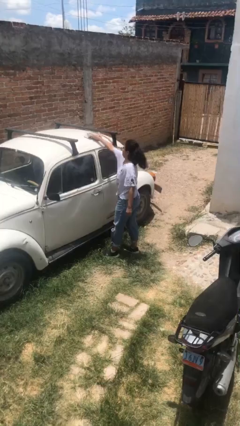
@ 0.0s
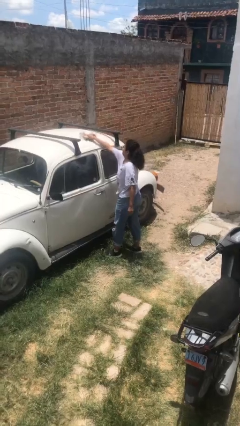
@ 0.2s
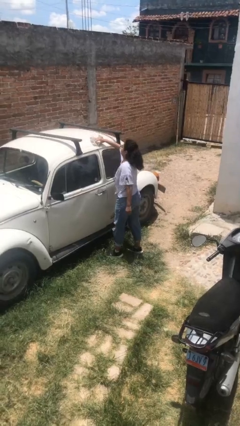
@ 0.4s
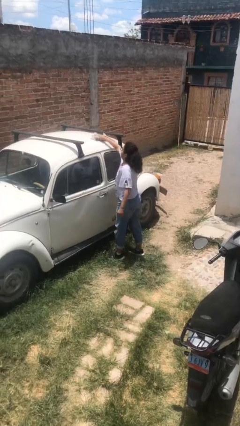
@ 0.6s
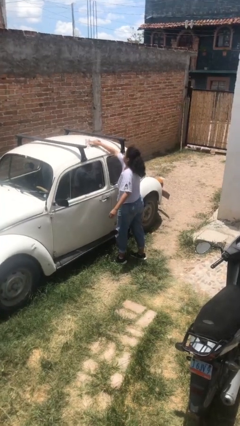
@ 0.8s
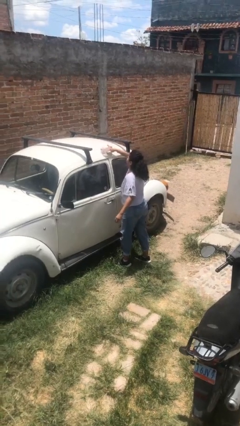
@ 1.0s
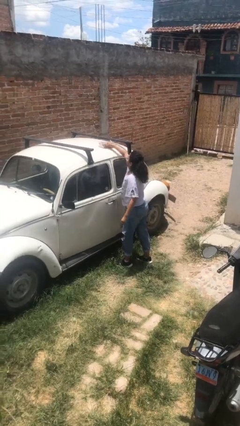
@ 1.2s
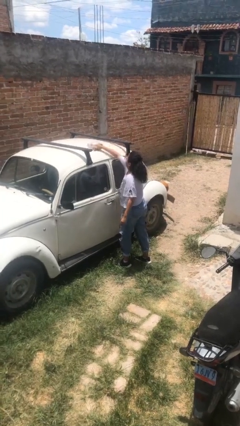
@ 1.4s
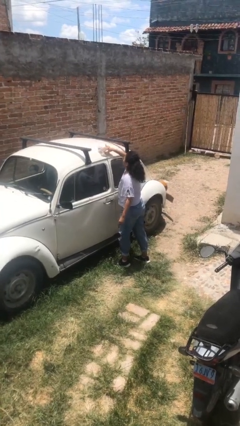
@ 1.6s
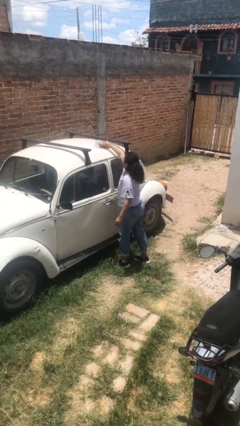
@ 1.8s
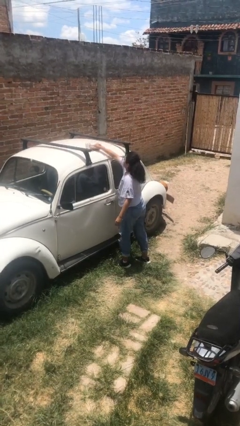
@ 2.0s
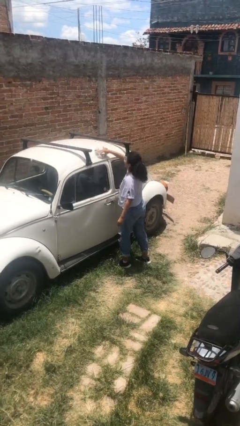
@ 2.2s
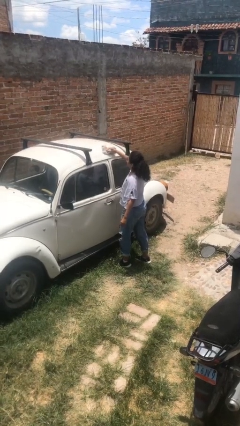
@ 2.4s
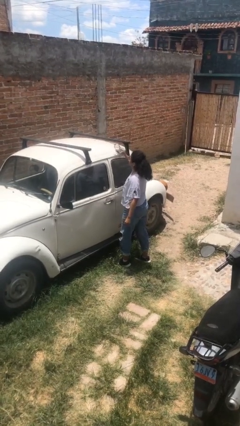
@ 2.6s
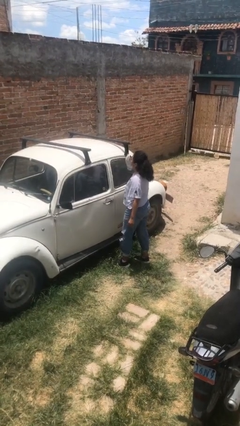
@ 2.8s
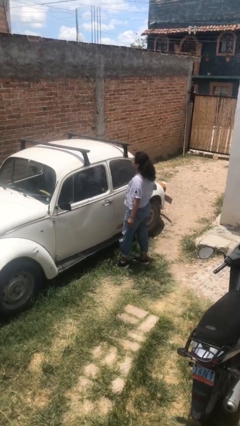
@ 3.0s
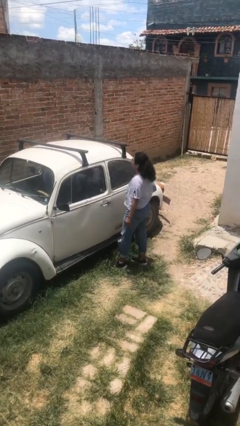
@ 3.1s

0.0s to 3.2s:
person polishes car with rag

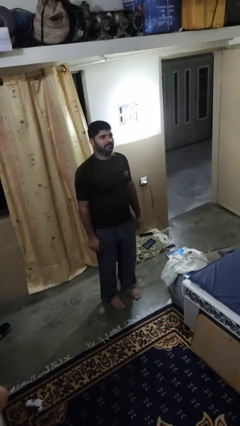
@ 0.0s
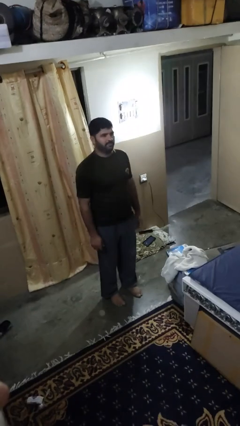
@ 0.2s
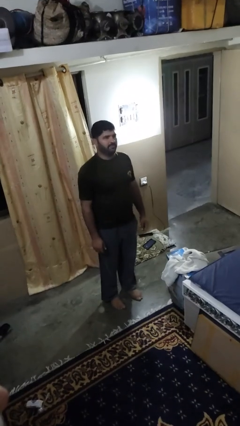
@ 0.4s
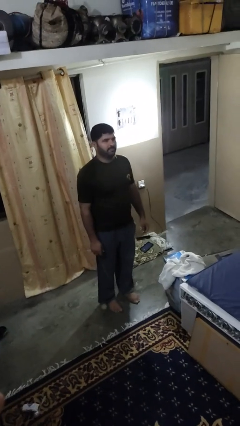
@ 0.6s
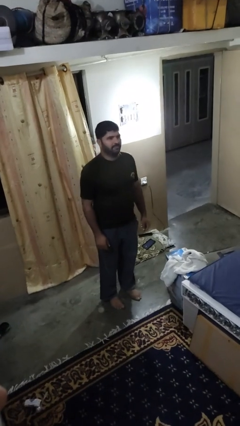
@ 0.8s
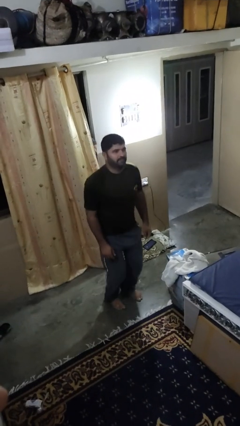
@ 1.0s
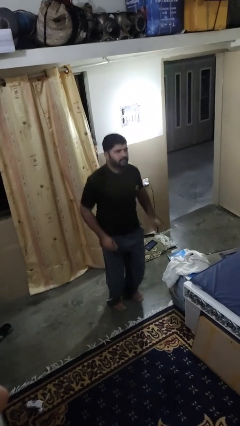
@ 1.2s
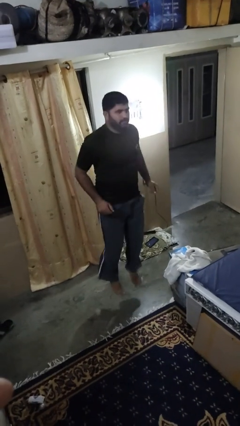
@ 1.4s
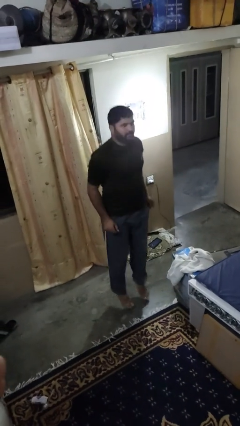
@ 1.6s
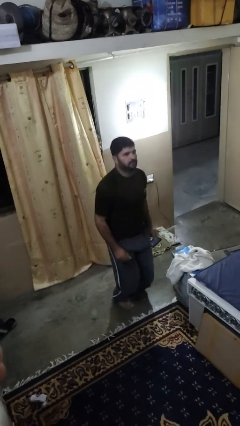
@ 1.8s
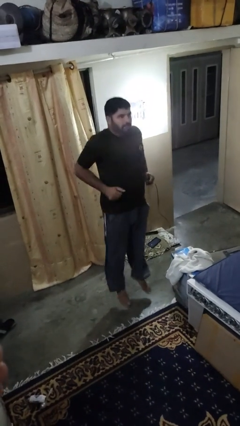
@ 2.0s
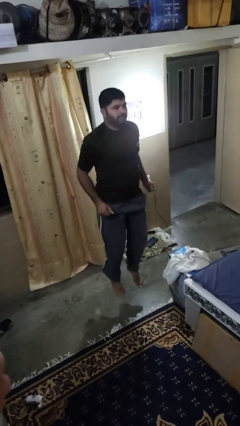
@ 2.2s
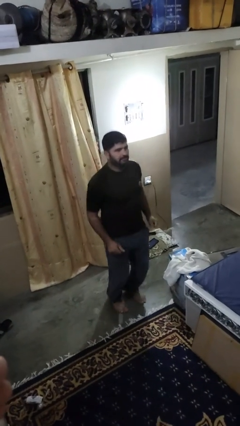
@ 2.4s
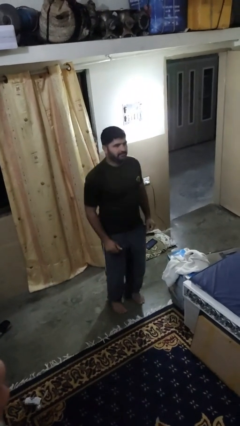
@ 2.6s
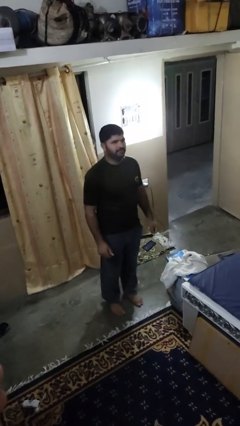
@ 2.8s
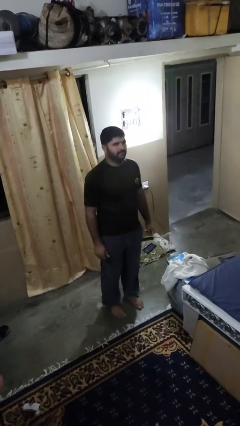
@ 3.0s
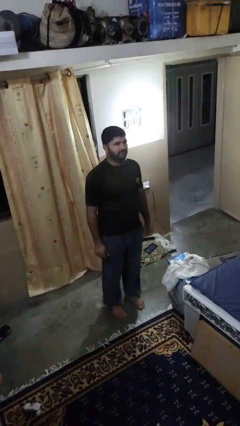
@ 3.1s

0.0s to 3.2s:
person jumps

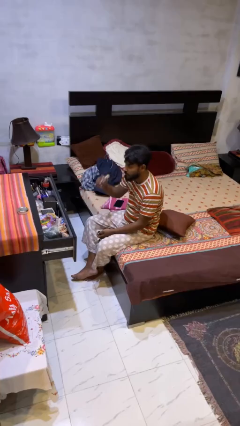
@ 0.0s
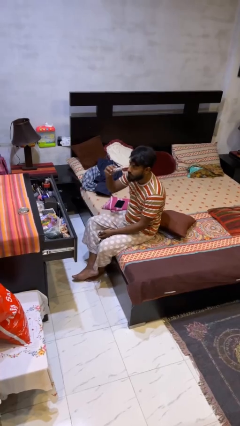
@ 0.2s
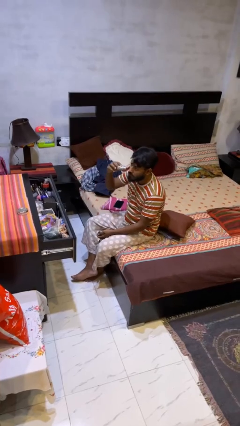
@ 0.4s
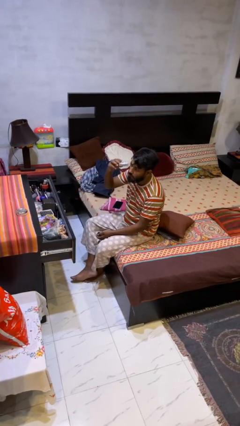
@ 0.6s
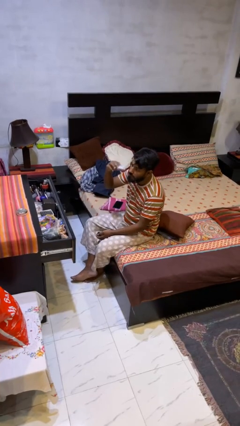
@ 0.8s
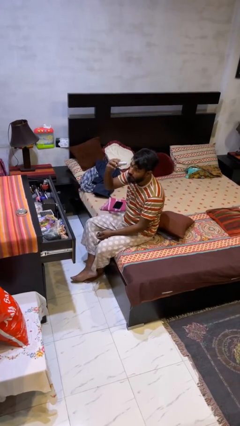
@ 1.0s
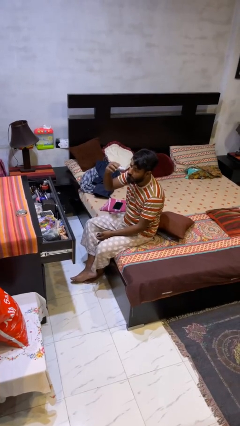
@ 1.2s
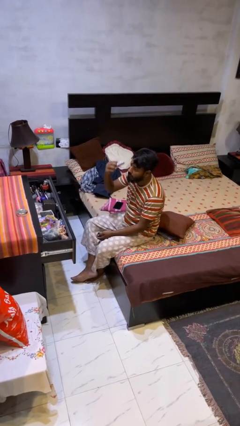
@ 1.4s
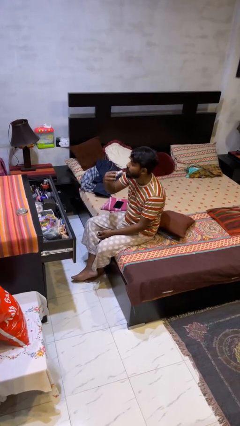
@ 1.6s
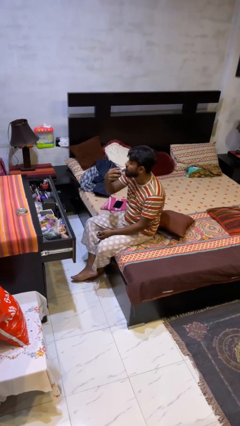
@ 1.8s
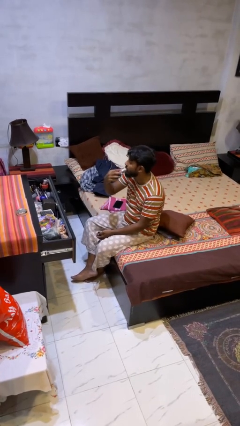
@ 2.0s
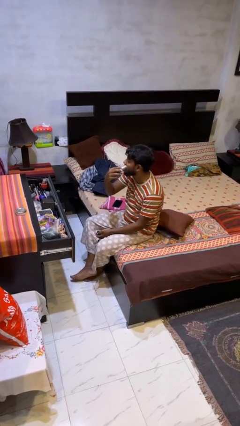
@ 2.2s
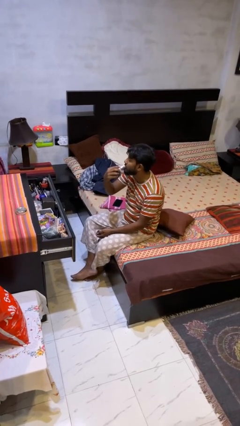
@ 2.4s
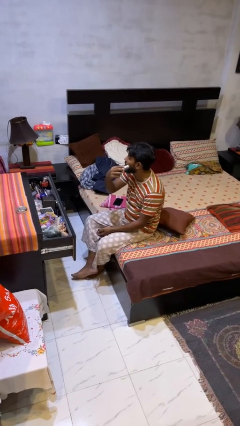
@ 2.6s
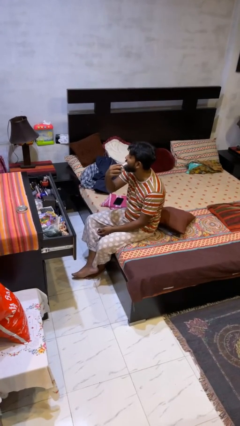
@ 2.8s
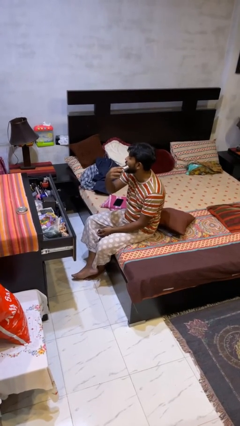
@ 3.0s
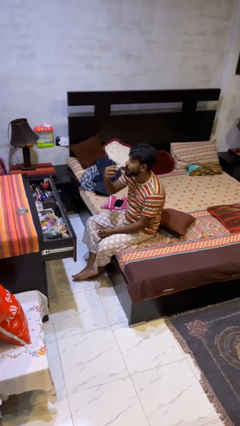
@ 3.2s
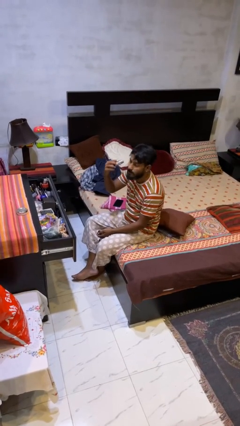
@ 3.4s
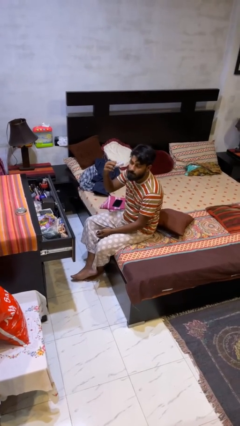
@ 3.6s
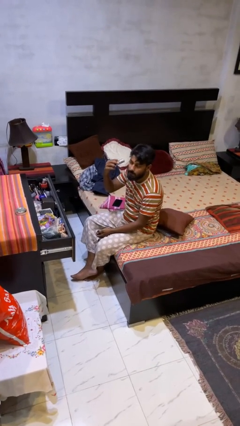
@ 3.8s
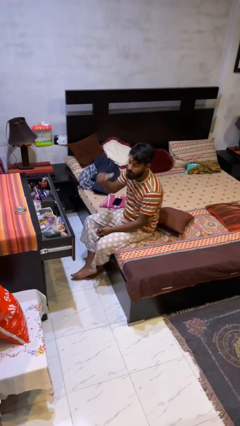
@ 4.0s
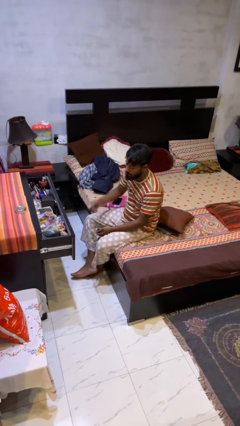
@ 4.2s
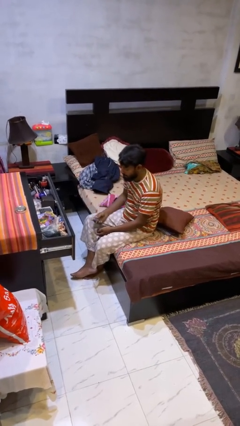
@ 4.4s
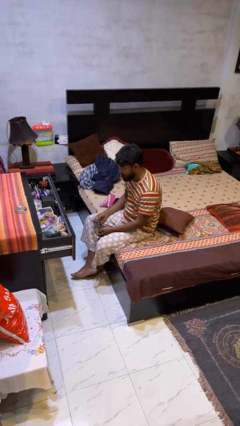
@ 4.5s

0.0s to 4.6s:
person applies foundation makeup

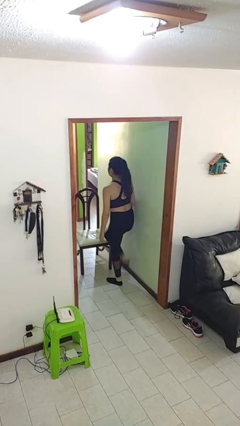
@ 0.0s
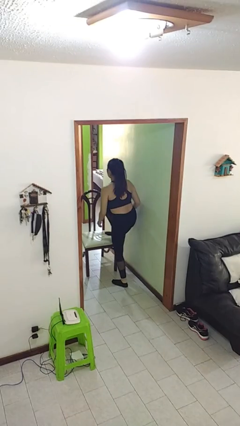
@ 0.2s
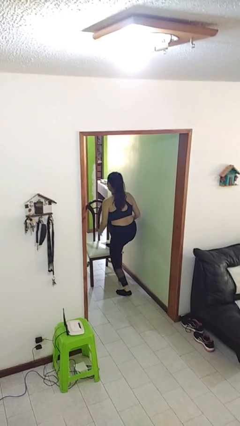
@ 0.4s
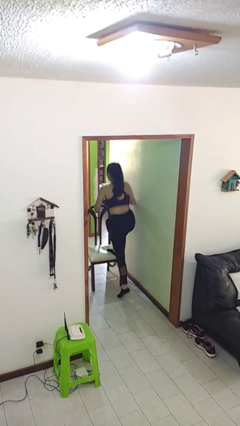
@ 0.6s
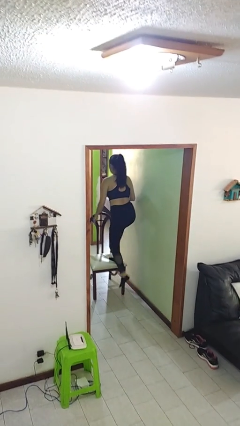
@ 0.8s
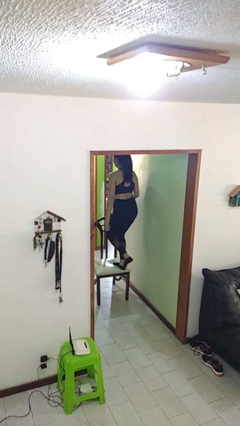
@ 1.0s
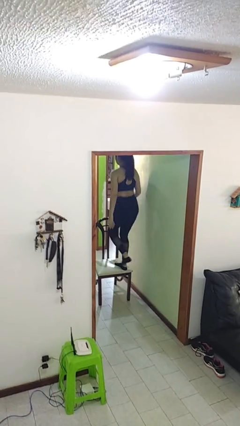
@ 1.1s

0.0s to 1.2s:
person climbs on chair

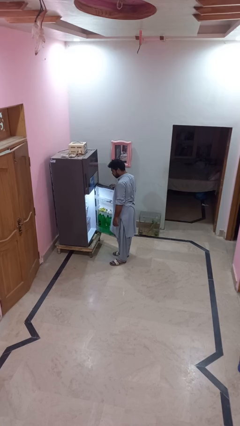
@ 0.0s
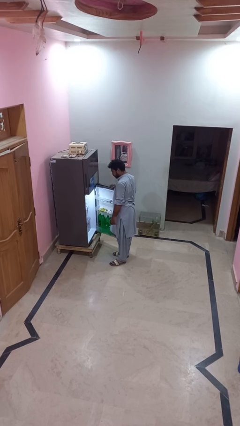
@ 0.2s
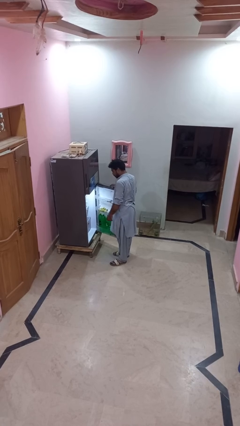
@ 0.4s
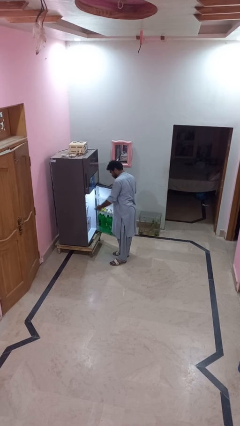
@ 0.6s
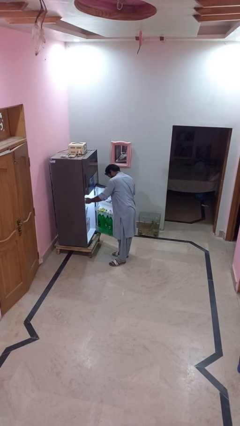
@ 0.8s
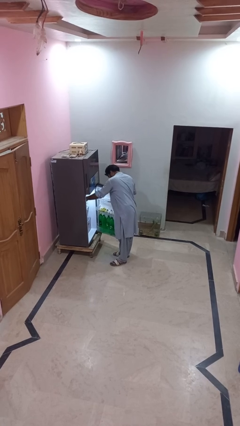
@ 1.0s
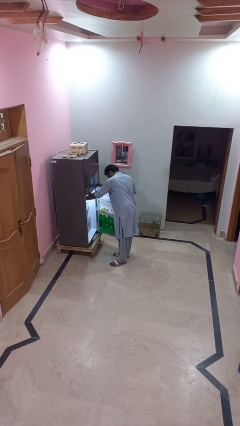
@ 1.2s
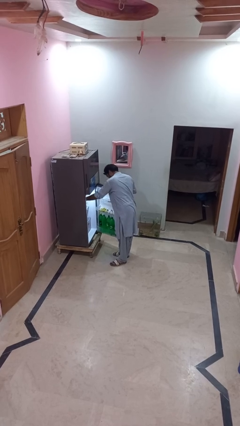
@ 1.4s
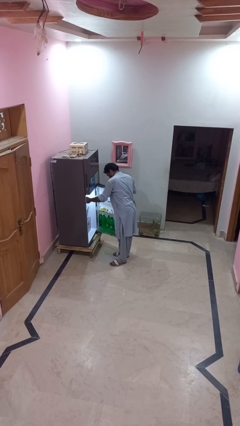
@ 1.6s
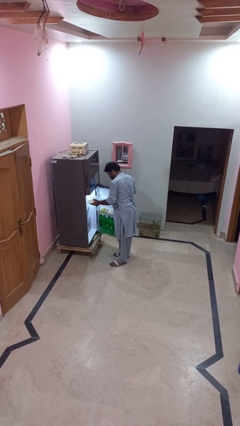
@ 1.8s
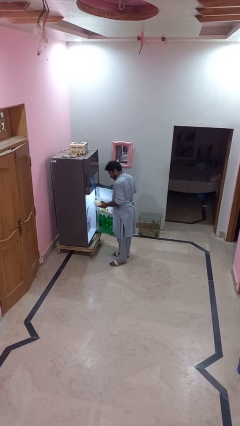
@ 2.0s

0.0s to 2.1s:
person takes object from refrigerator

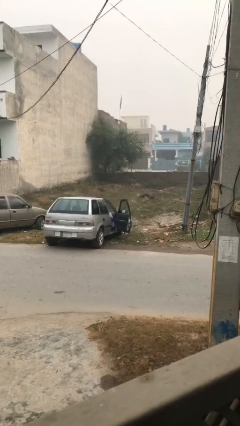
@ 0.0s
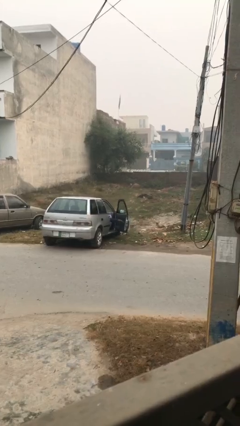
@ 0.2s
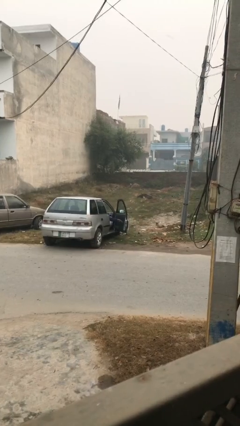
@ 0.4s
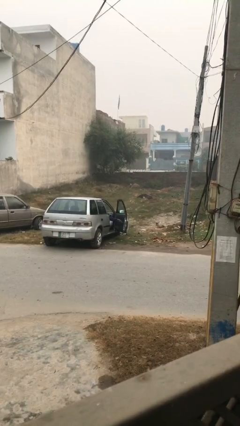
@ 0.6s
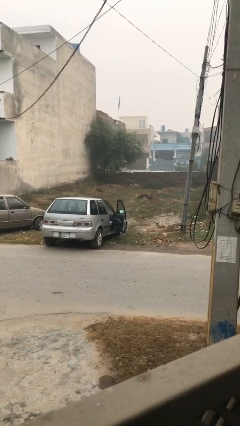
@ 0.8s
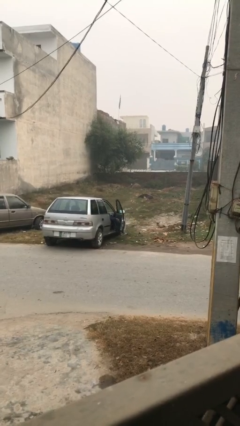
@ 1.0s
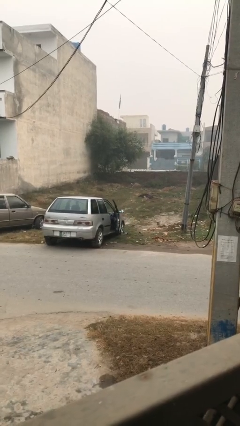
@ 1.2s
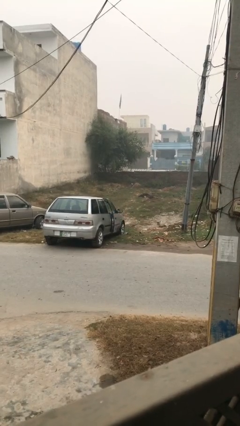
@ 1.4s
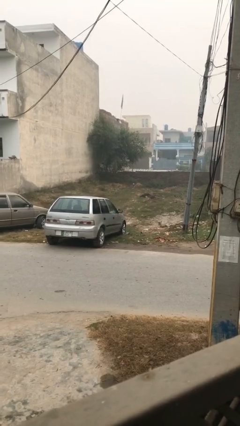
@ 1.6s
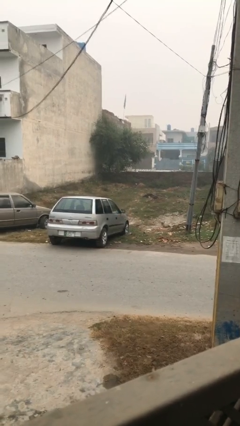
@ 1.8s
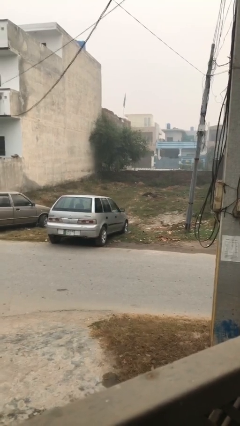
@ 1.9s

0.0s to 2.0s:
person closes car door

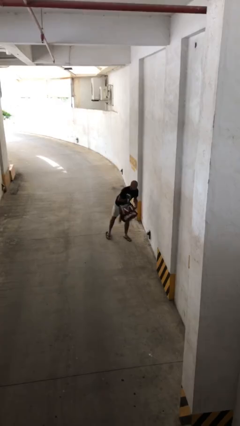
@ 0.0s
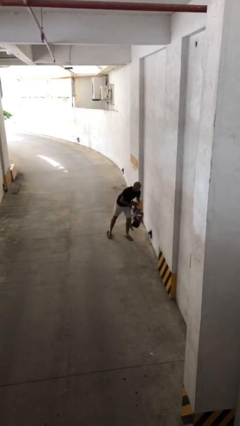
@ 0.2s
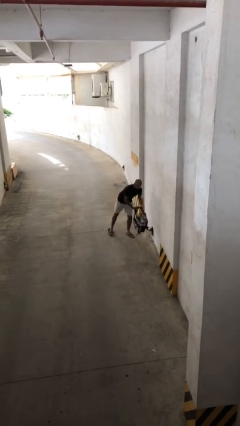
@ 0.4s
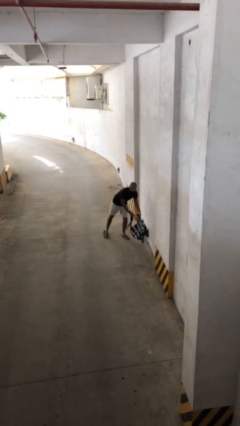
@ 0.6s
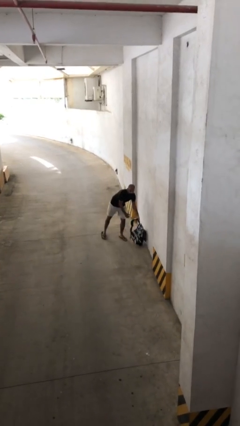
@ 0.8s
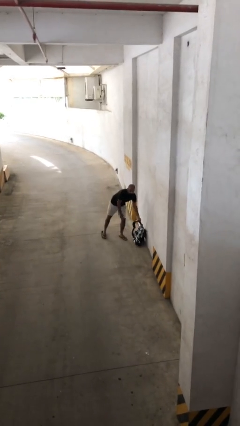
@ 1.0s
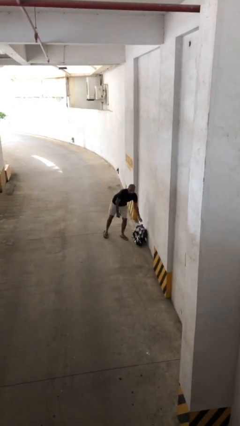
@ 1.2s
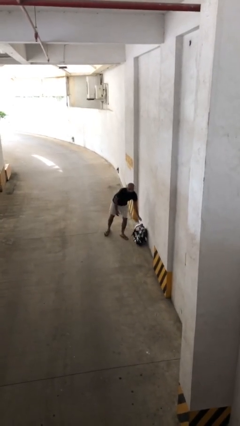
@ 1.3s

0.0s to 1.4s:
person puts down object on floor
